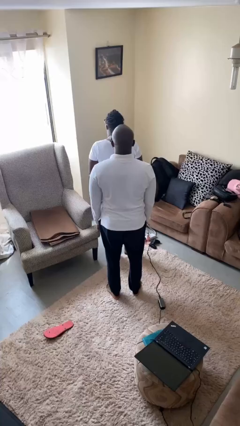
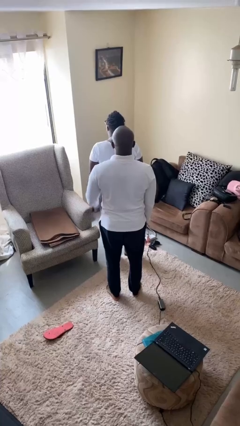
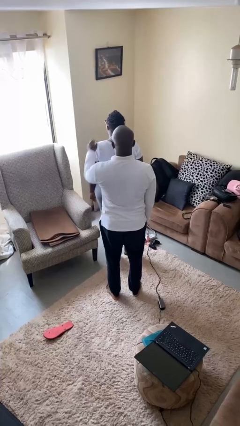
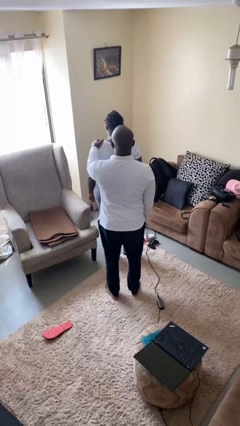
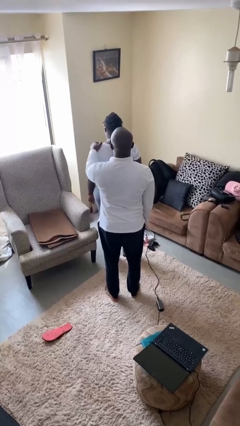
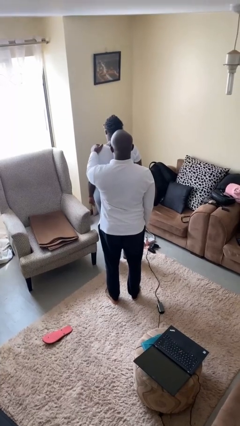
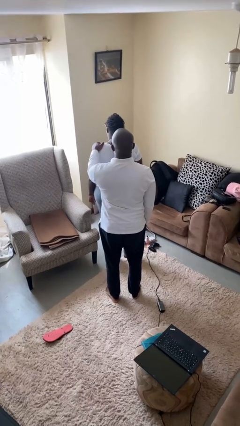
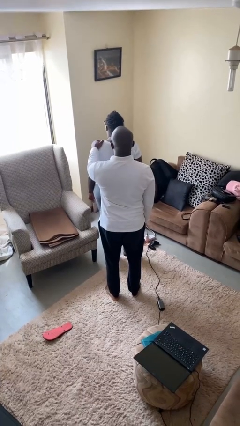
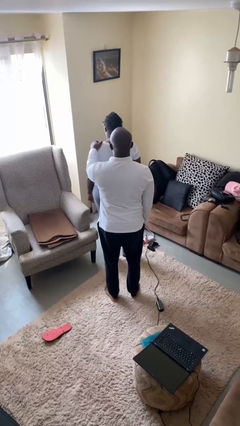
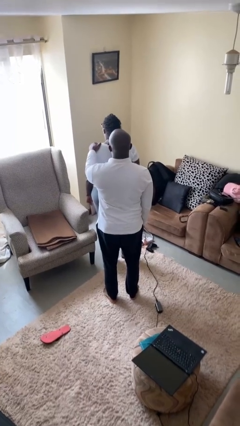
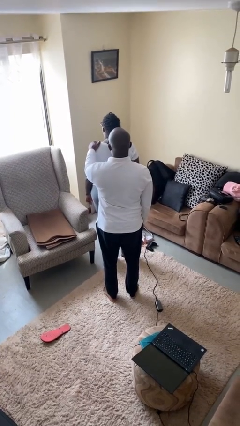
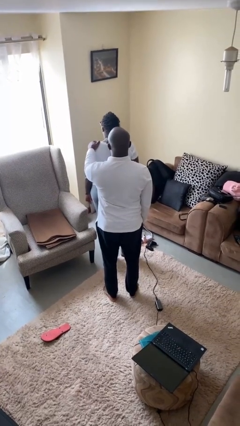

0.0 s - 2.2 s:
person grabs person by shoulder

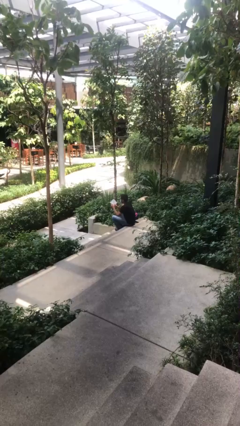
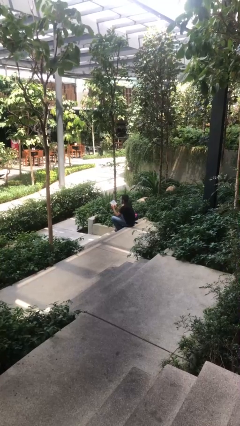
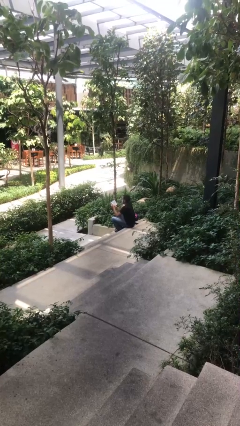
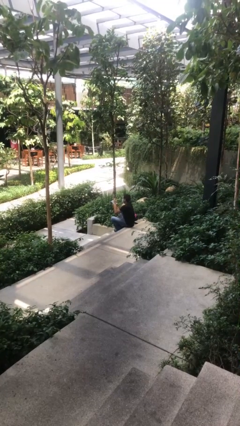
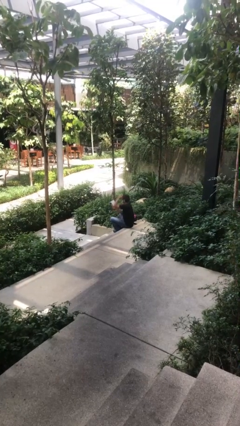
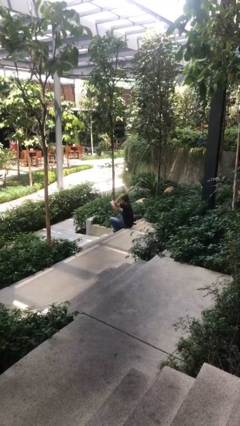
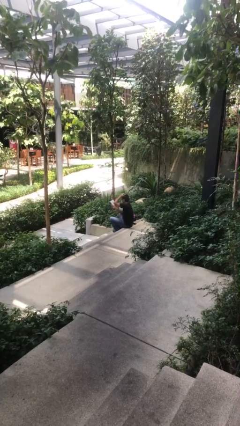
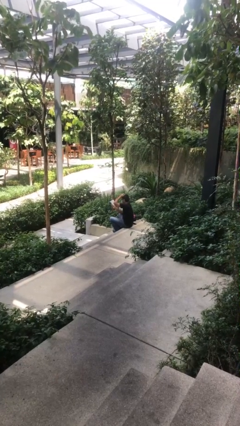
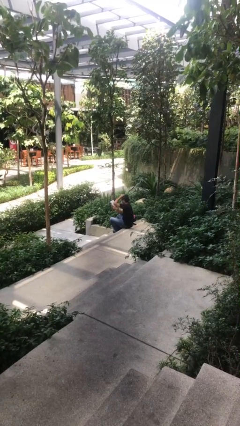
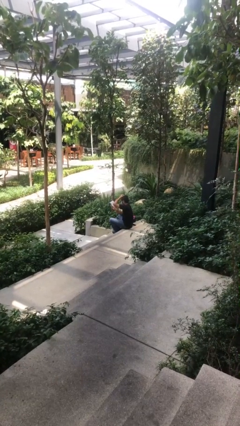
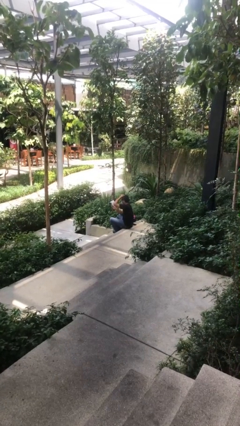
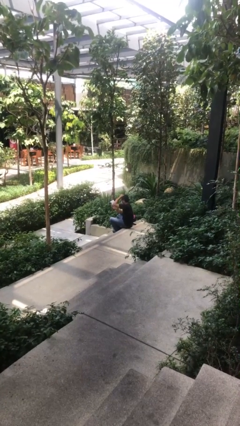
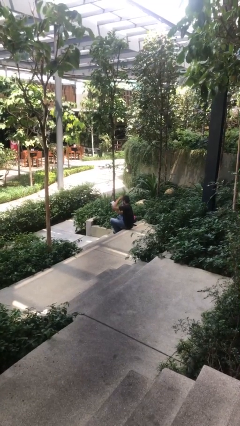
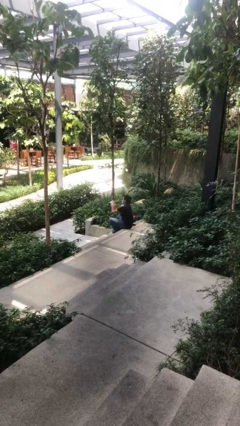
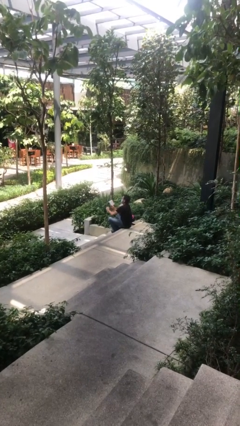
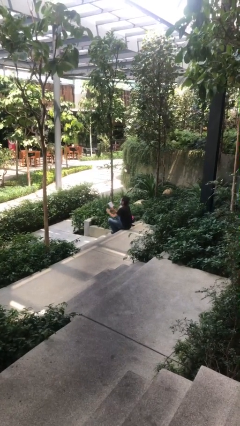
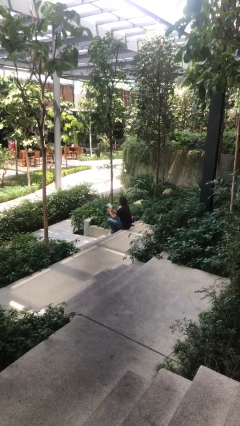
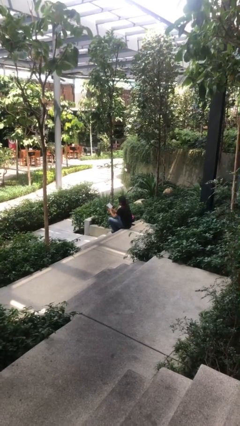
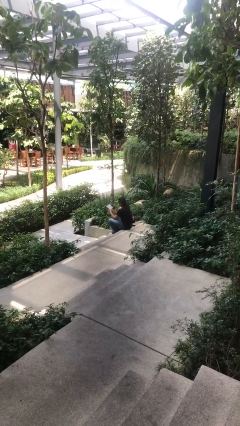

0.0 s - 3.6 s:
person reads document

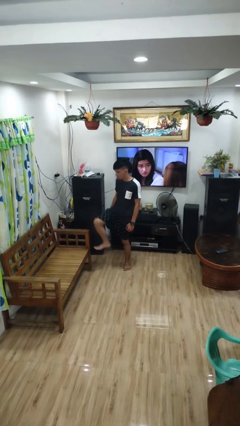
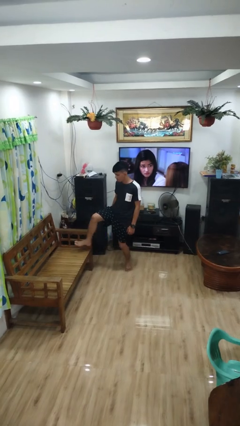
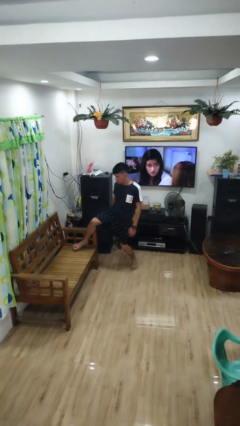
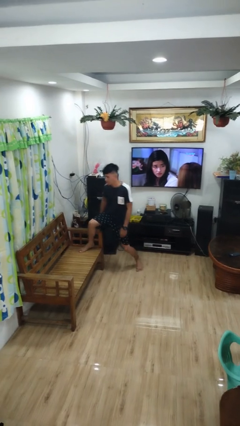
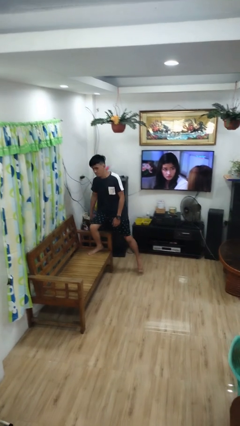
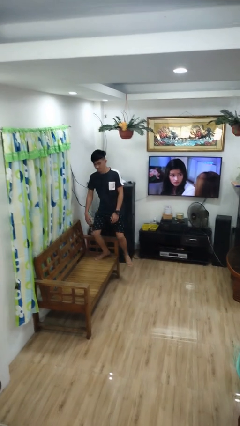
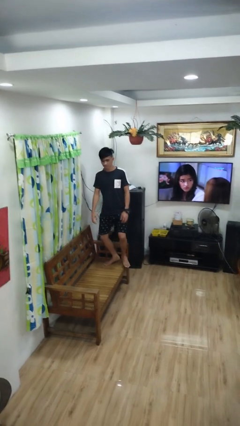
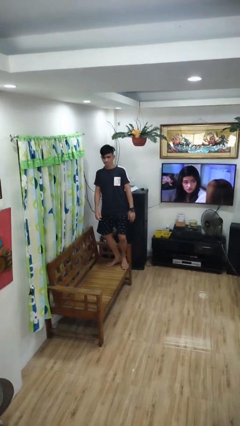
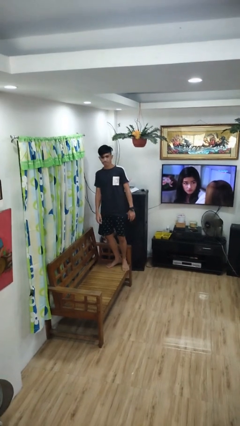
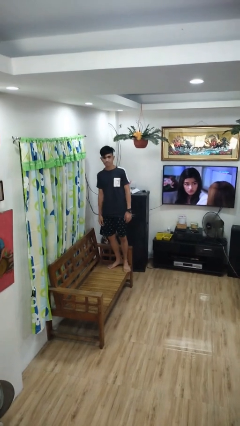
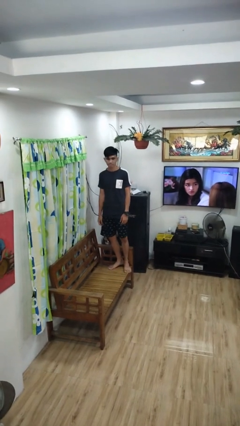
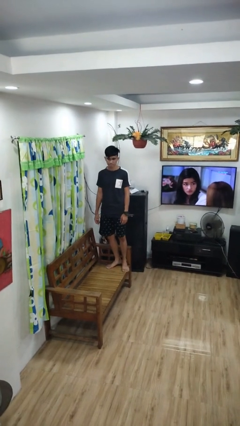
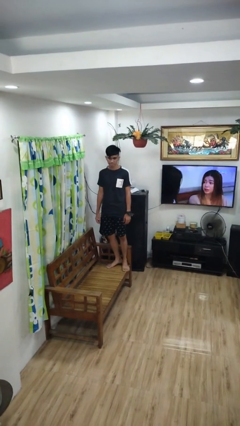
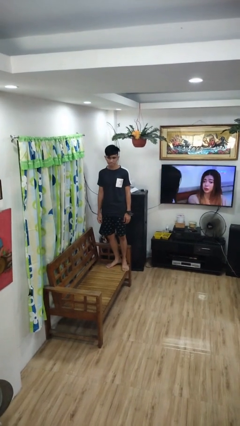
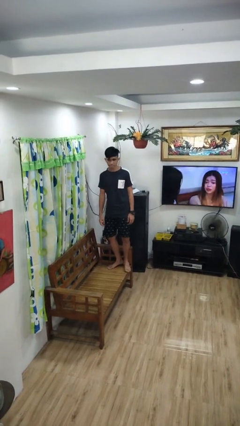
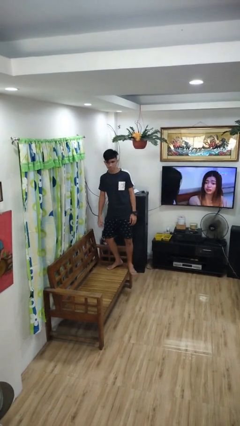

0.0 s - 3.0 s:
person climbs on couch

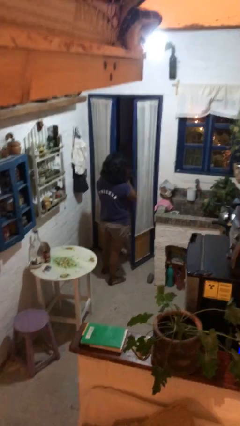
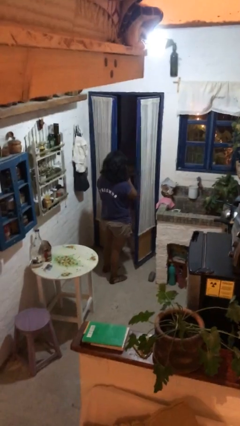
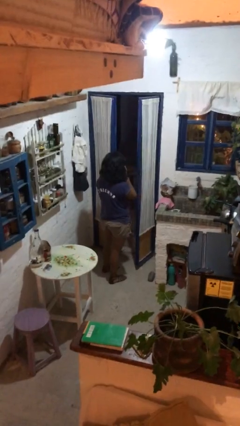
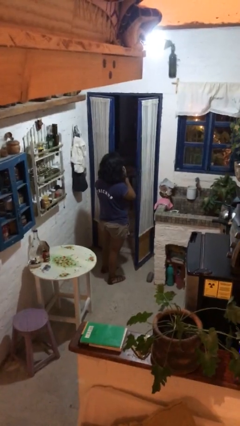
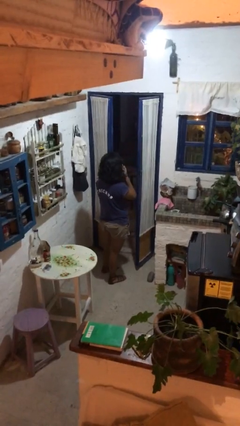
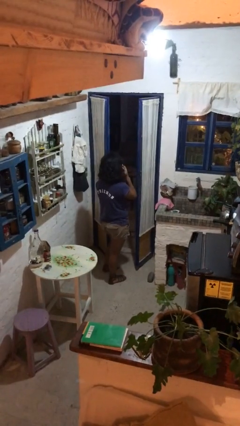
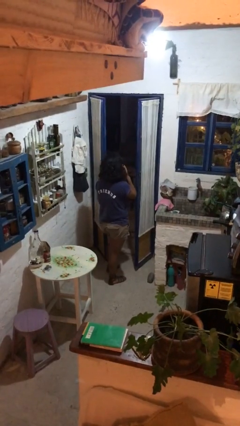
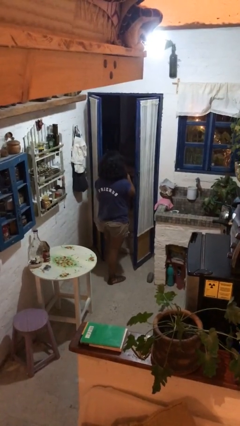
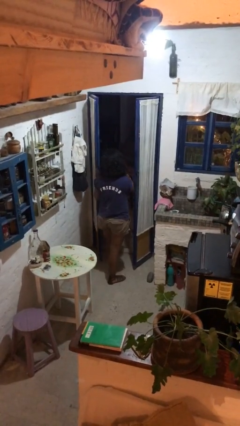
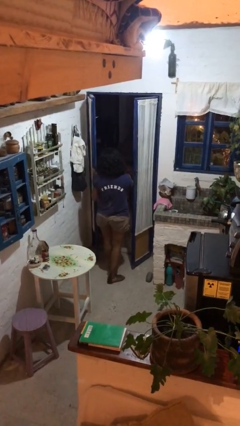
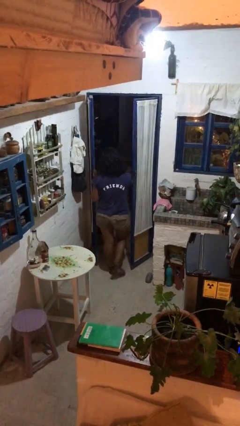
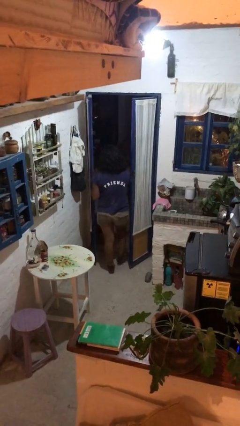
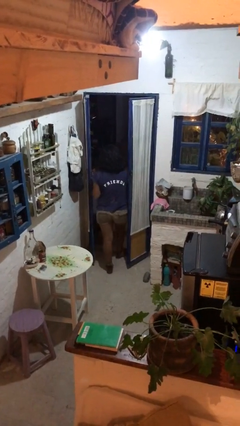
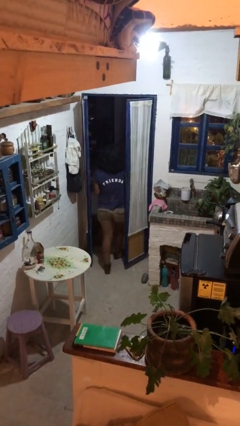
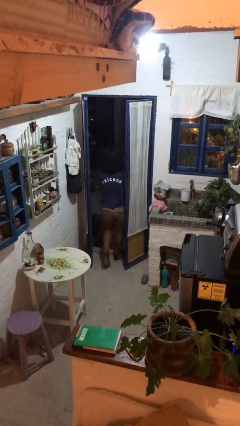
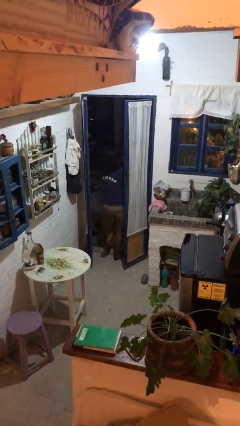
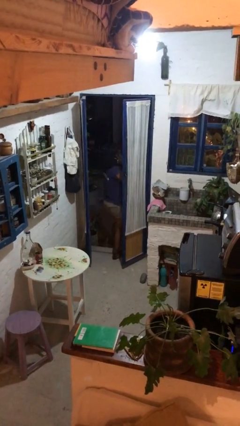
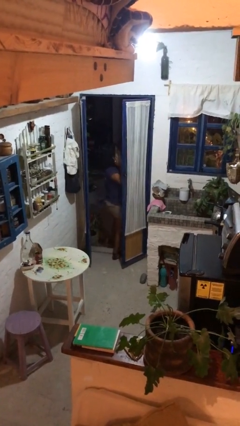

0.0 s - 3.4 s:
person exits scene through structure

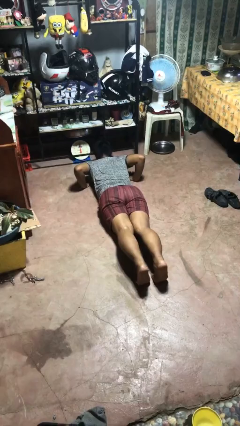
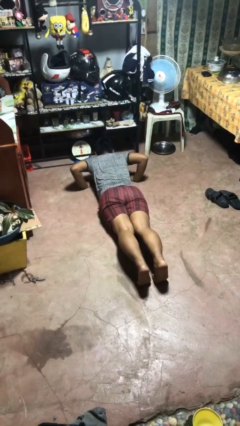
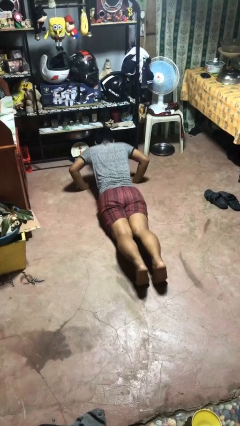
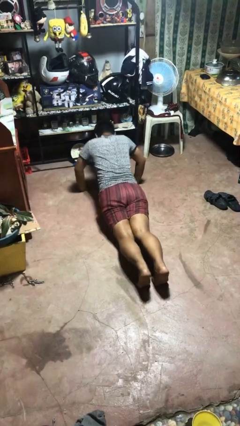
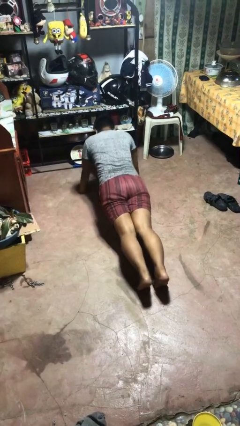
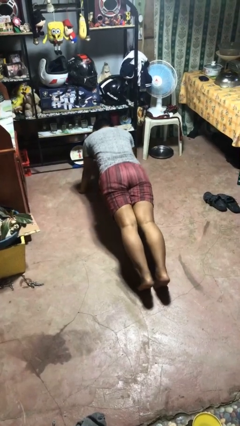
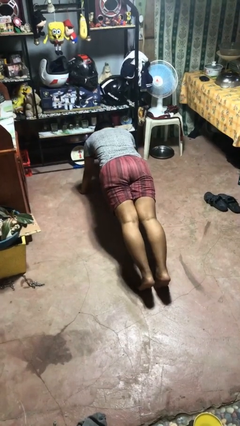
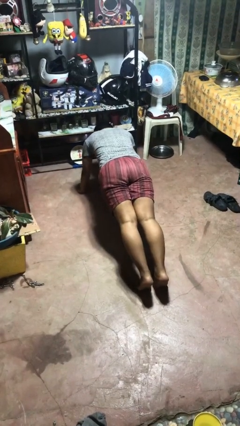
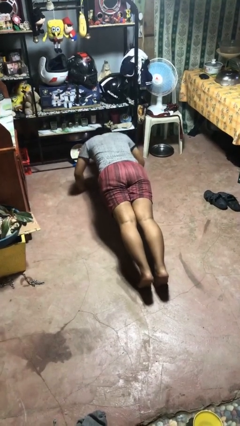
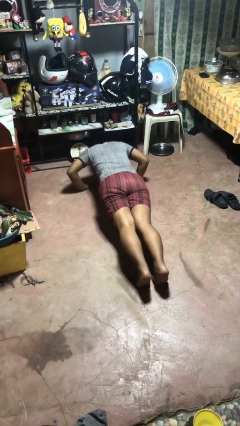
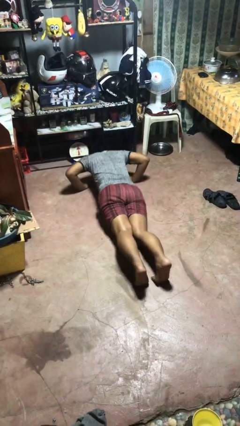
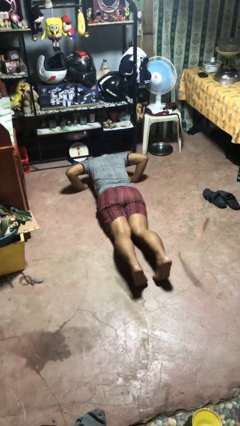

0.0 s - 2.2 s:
person exercises with pushup

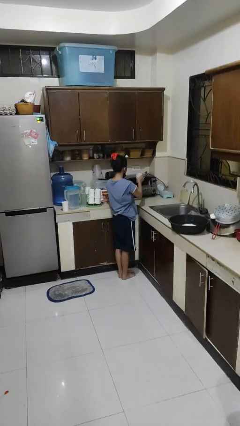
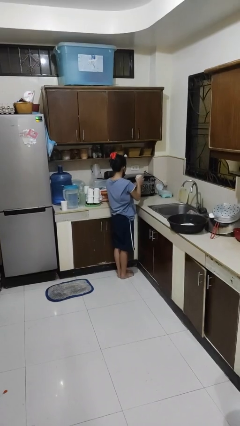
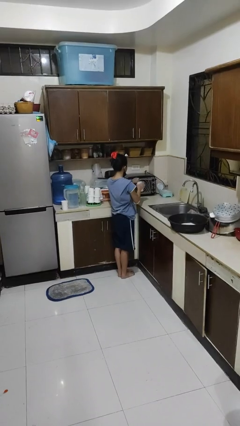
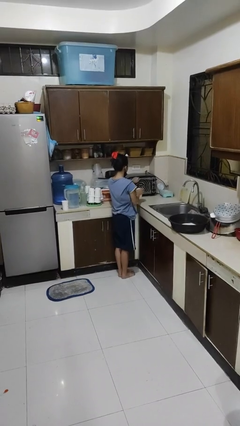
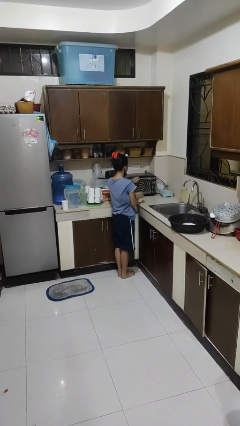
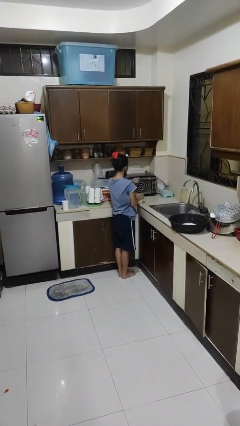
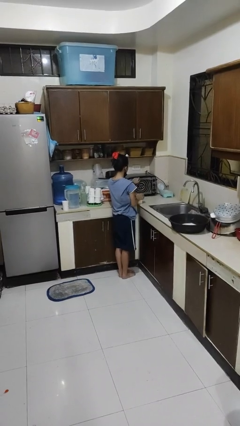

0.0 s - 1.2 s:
person closes microwave

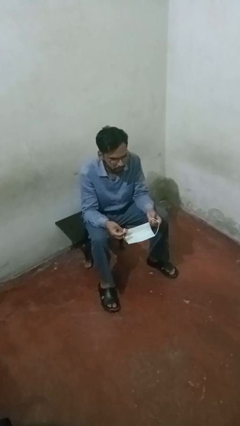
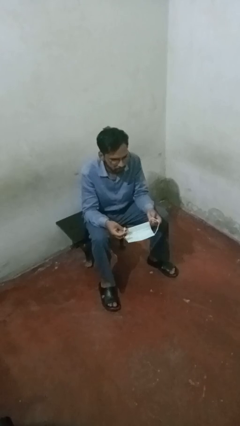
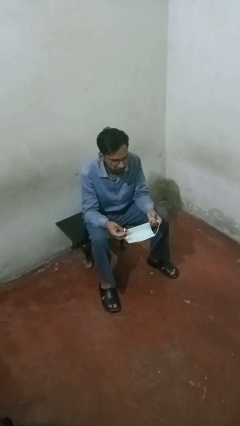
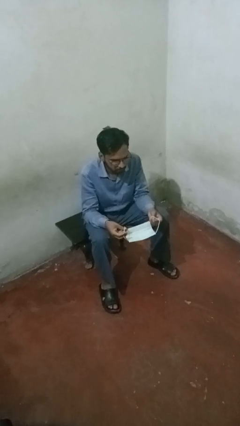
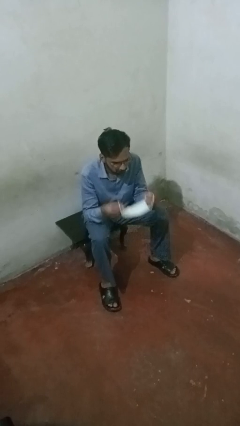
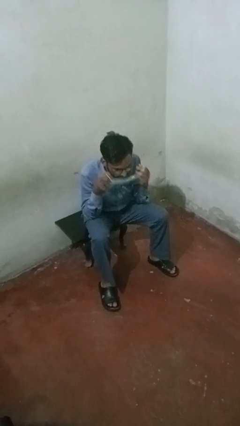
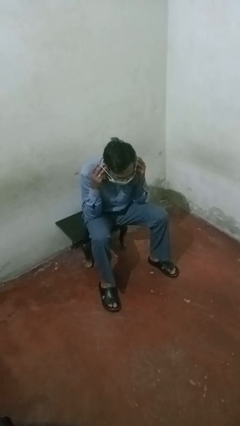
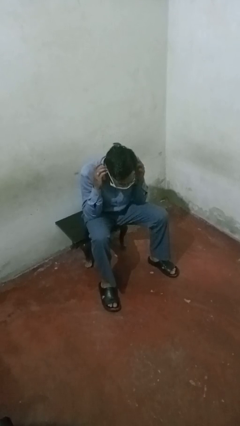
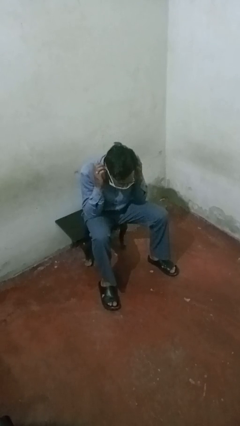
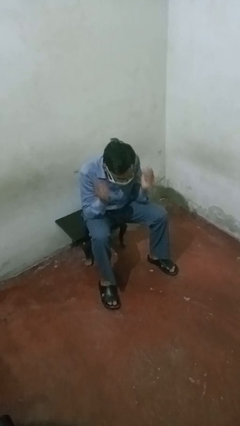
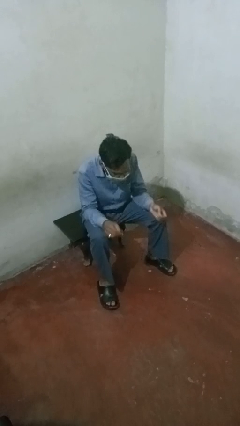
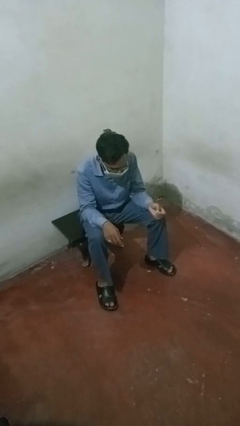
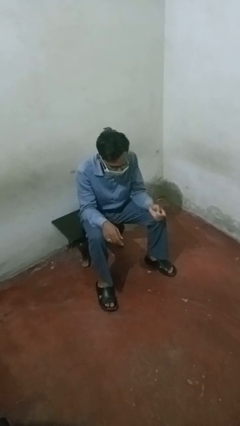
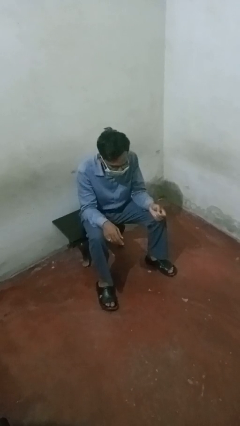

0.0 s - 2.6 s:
person puts on facemask
